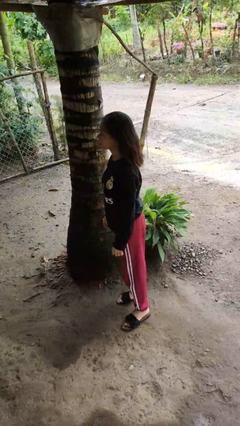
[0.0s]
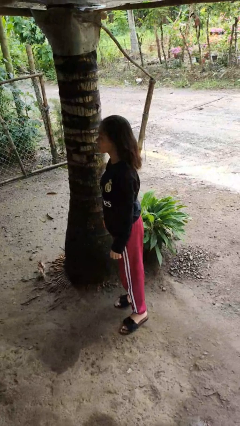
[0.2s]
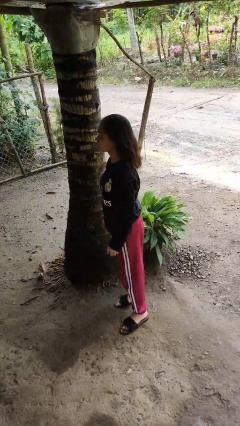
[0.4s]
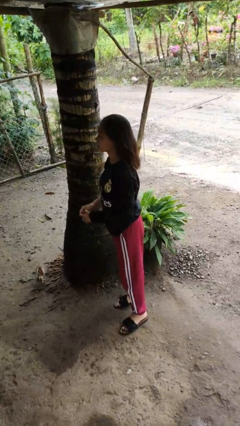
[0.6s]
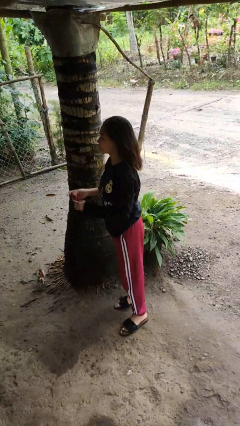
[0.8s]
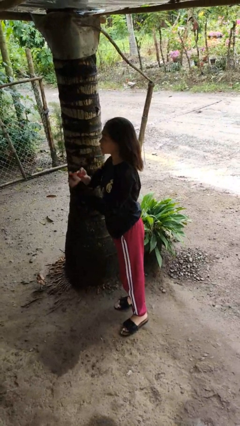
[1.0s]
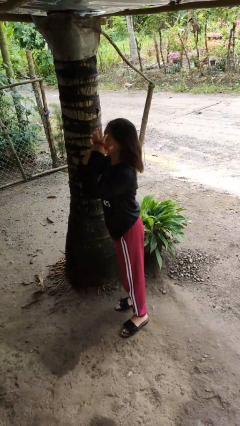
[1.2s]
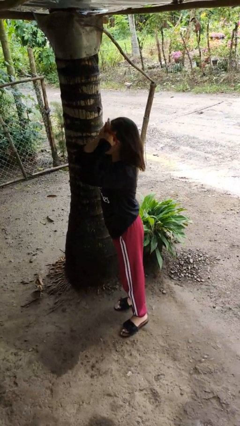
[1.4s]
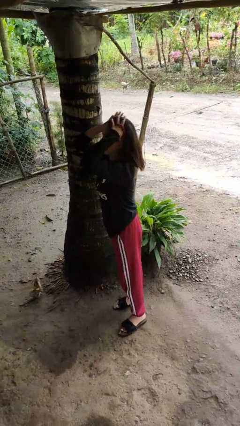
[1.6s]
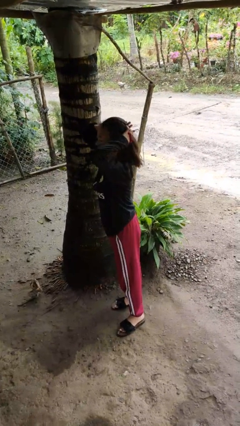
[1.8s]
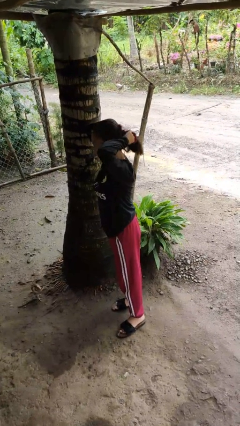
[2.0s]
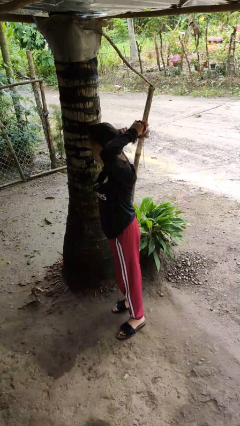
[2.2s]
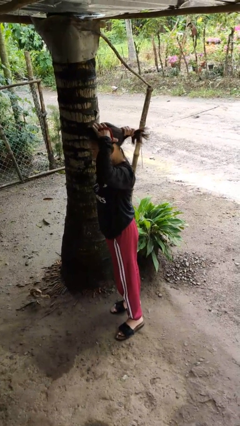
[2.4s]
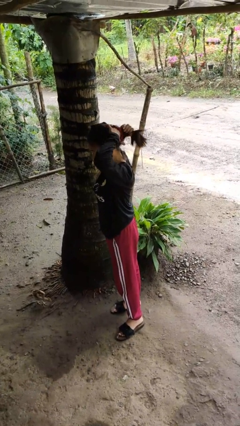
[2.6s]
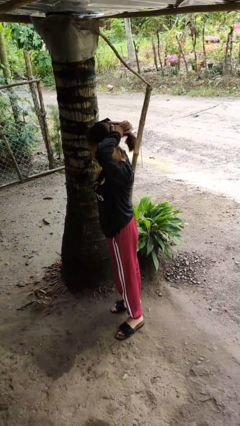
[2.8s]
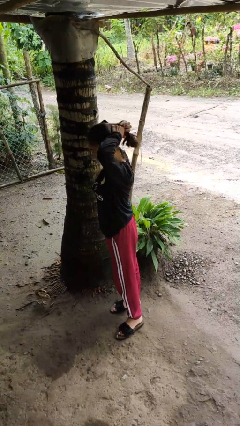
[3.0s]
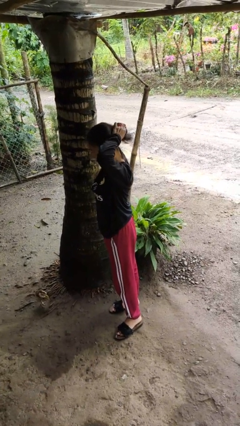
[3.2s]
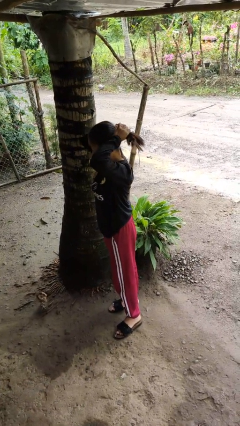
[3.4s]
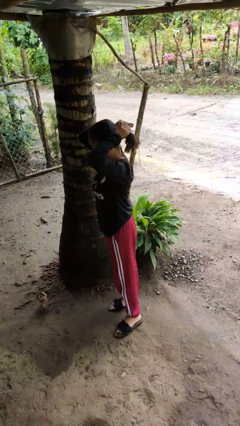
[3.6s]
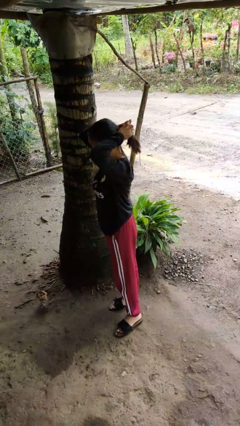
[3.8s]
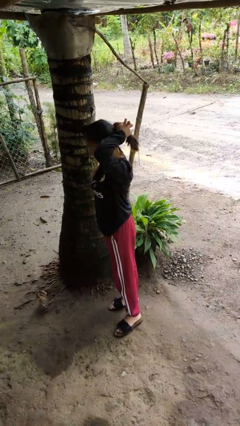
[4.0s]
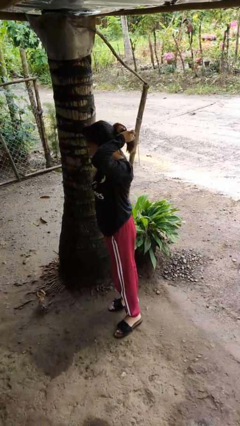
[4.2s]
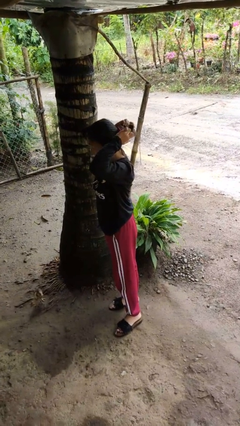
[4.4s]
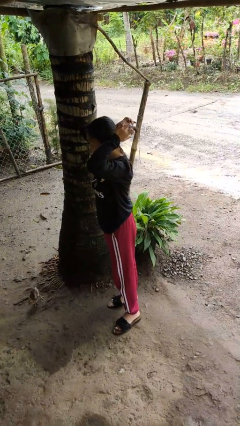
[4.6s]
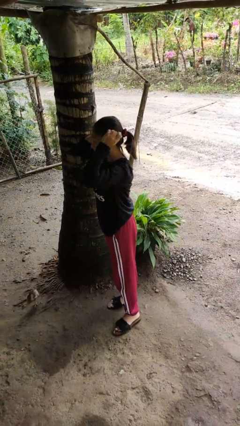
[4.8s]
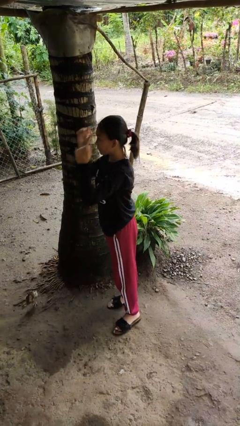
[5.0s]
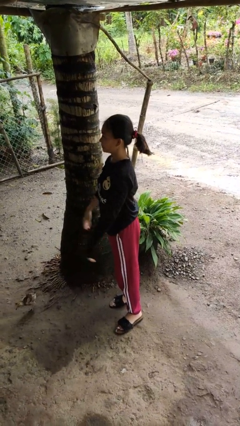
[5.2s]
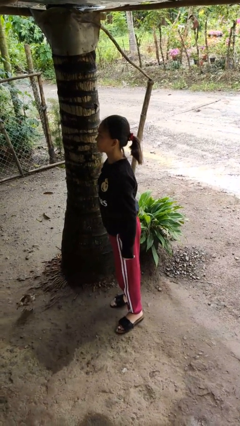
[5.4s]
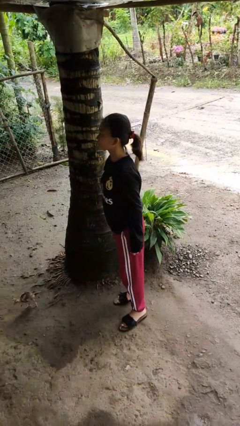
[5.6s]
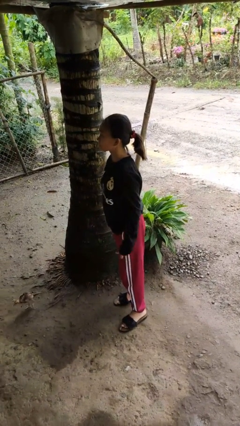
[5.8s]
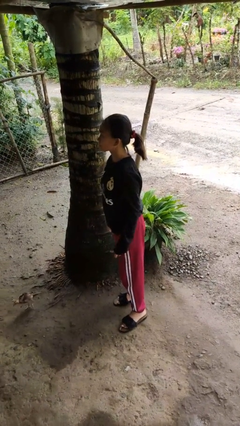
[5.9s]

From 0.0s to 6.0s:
person puts hair in ponytail

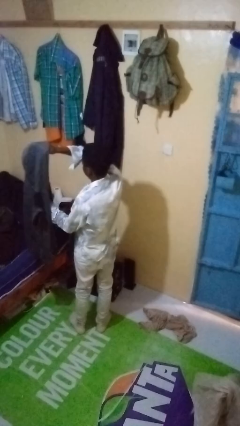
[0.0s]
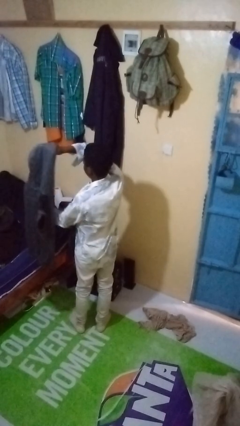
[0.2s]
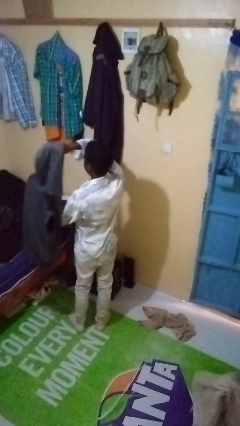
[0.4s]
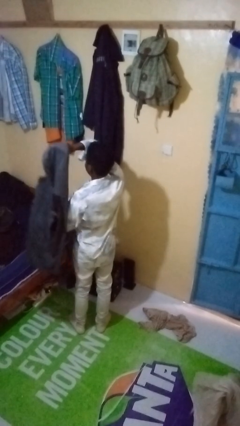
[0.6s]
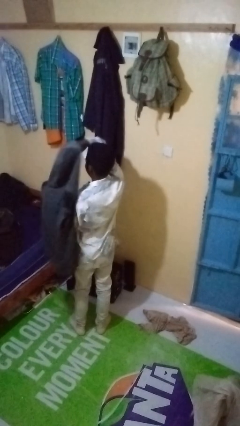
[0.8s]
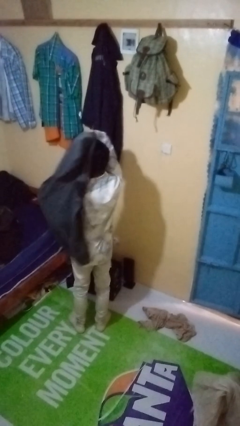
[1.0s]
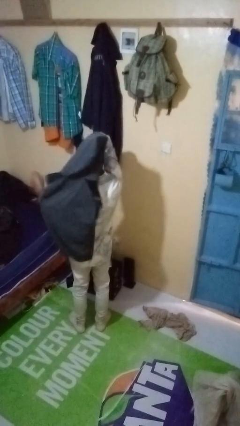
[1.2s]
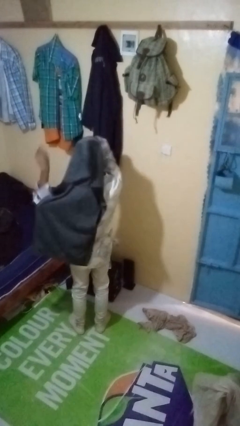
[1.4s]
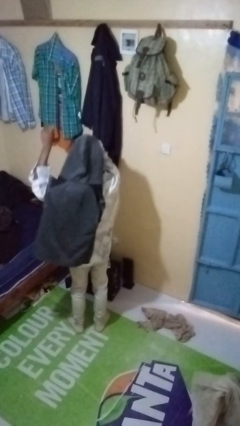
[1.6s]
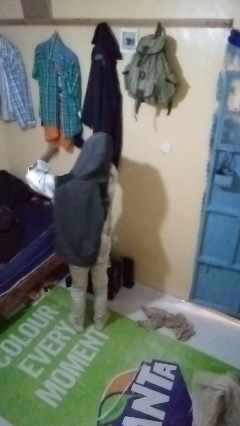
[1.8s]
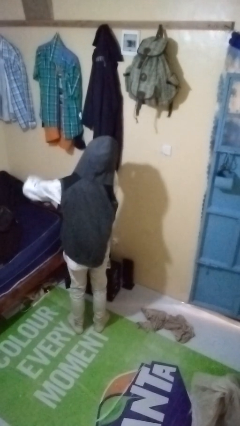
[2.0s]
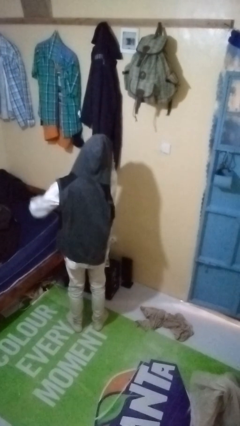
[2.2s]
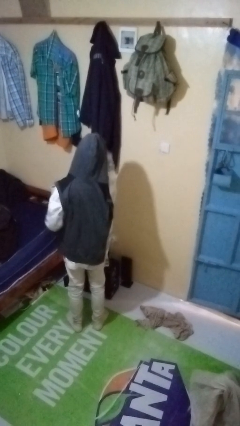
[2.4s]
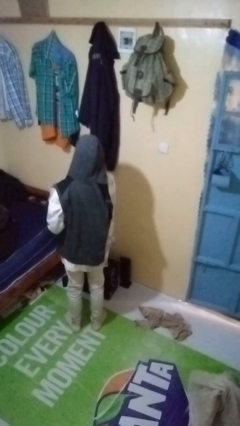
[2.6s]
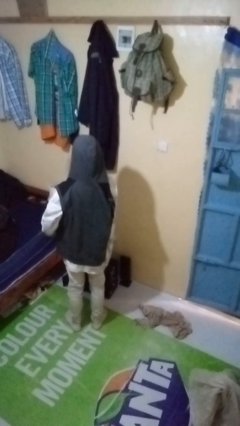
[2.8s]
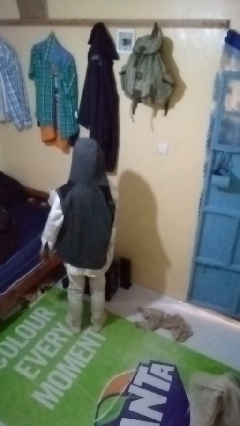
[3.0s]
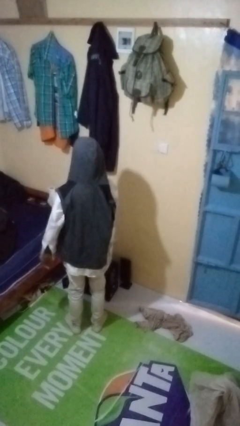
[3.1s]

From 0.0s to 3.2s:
person puts on hoodie

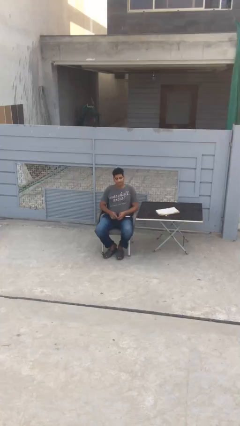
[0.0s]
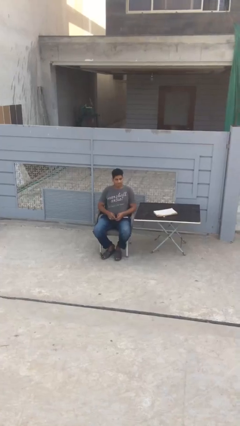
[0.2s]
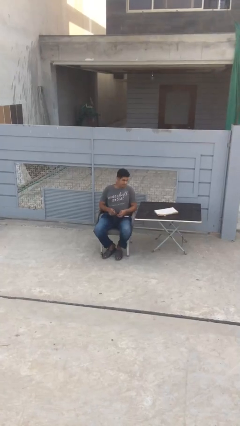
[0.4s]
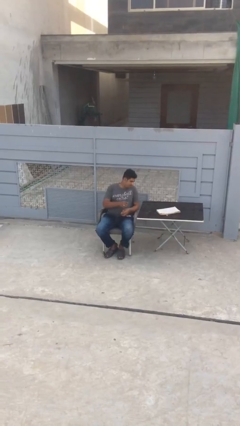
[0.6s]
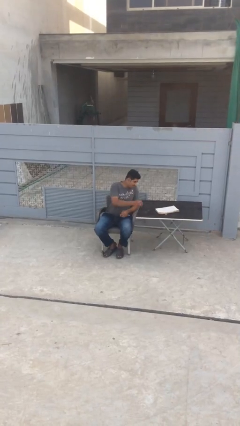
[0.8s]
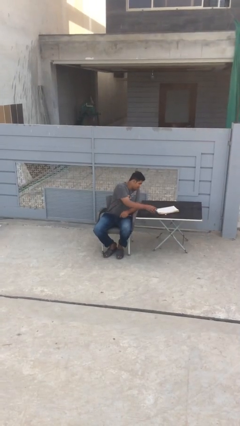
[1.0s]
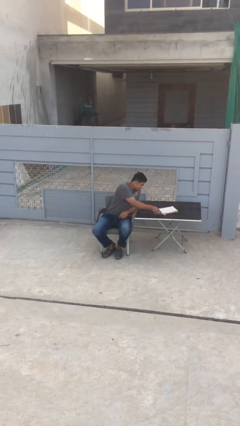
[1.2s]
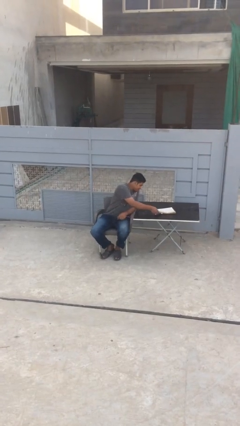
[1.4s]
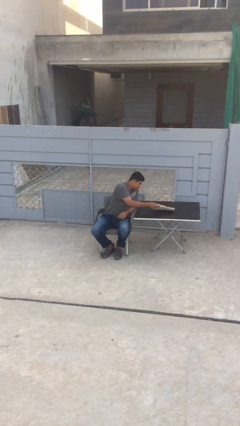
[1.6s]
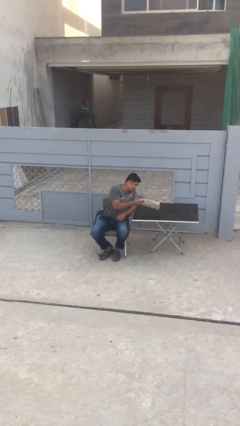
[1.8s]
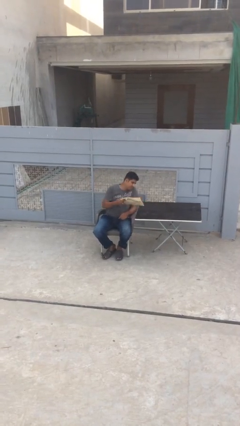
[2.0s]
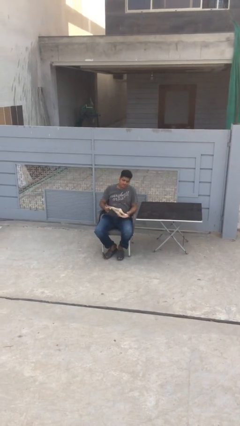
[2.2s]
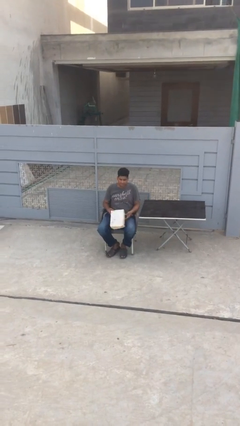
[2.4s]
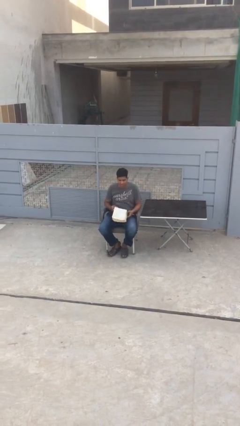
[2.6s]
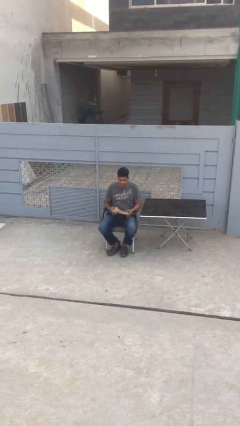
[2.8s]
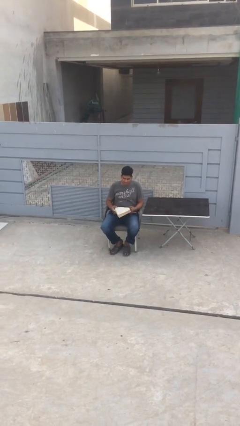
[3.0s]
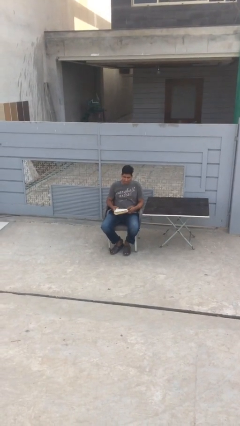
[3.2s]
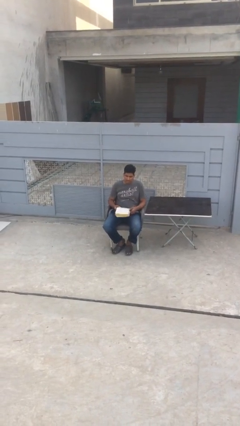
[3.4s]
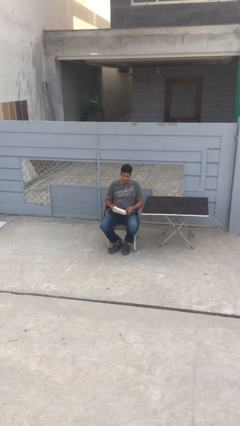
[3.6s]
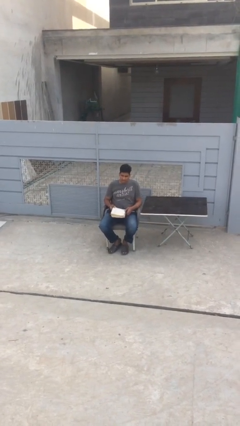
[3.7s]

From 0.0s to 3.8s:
person picks up object from table

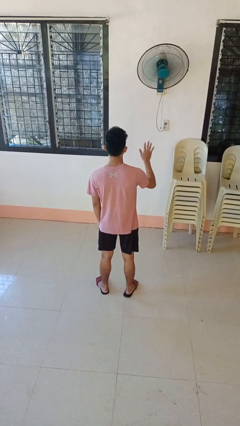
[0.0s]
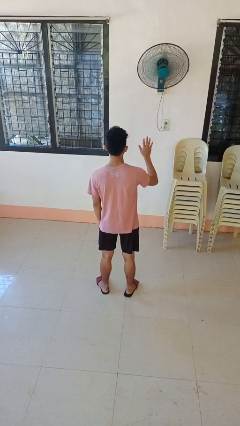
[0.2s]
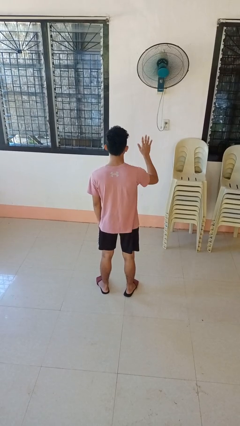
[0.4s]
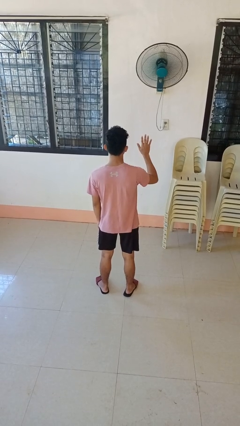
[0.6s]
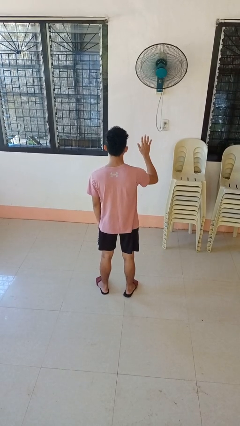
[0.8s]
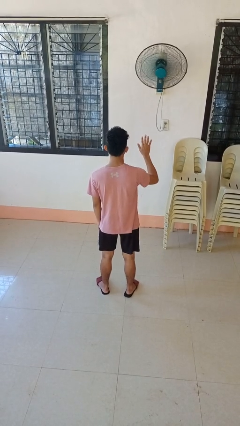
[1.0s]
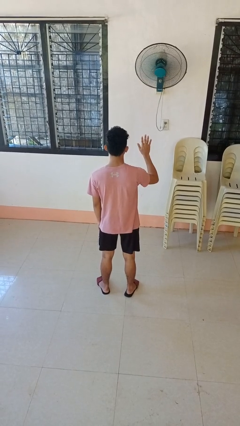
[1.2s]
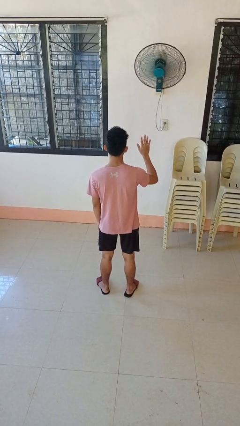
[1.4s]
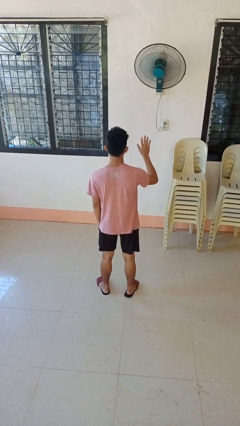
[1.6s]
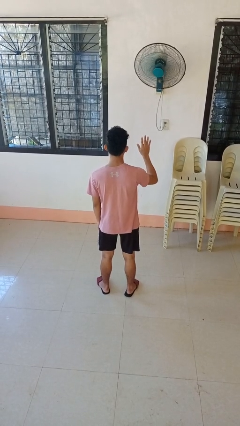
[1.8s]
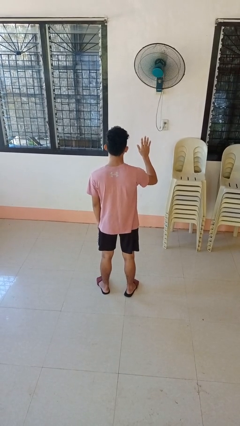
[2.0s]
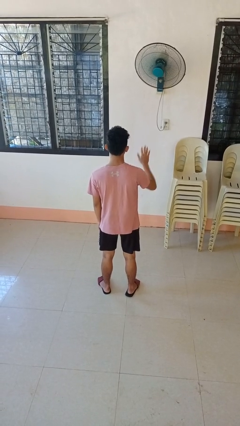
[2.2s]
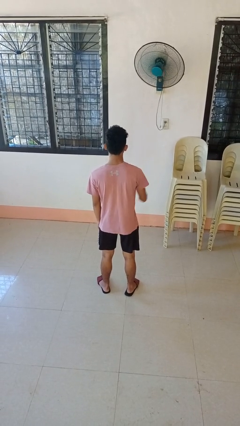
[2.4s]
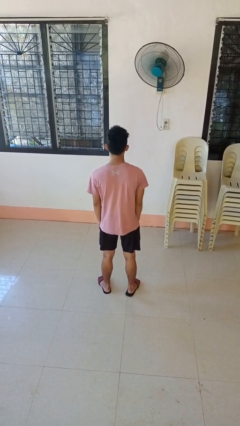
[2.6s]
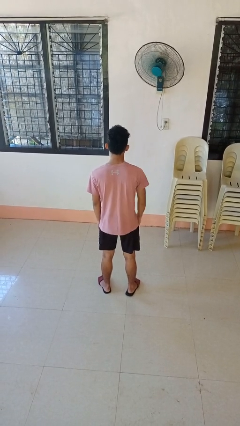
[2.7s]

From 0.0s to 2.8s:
person gestures number five

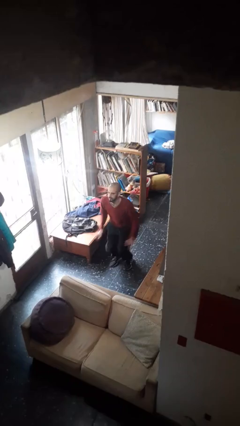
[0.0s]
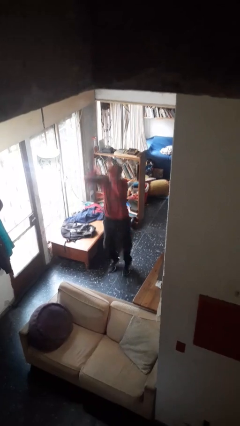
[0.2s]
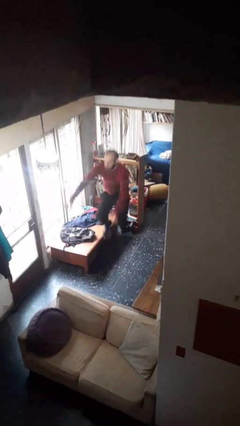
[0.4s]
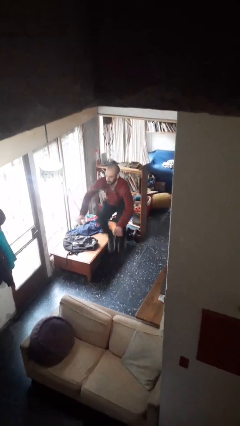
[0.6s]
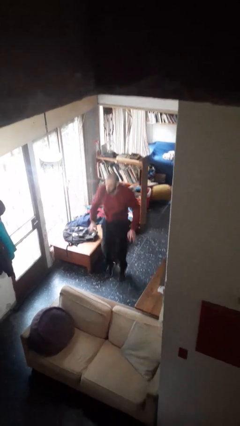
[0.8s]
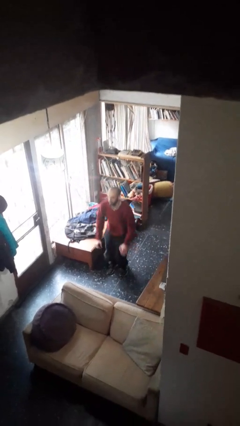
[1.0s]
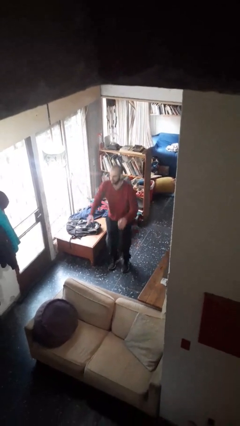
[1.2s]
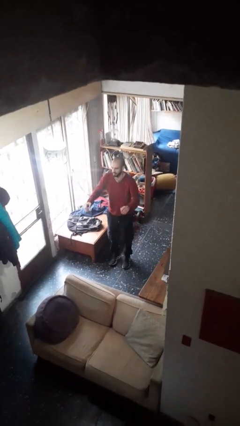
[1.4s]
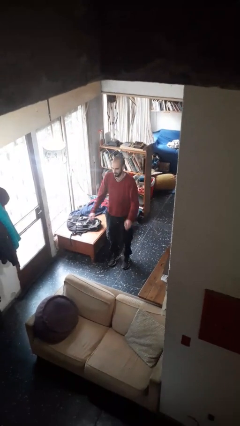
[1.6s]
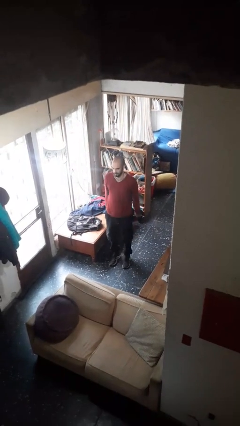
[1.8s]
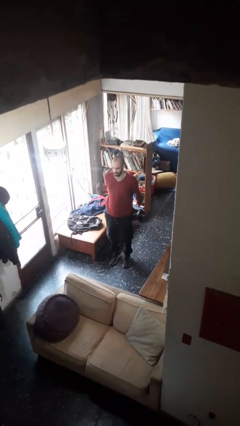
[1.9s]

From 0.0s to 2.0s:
person jumps
